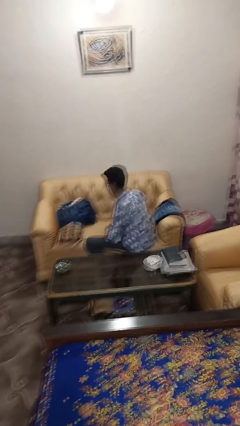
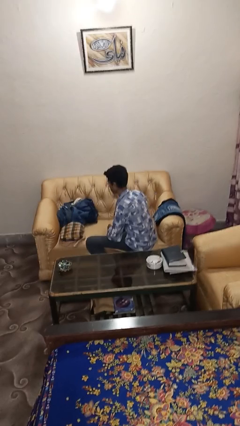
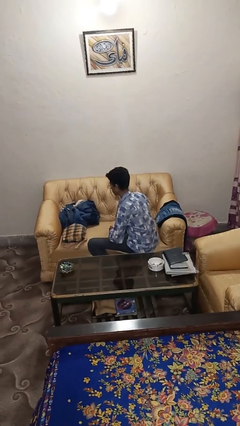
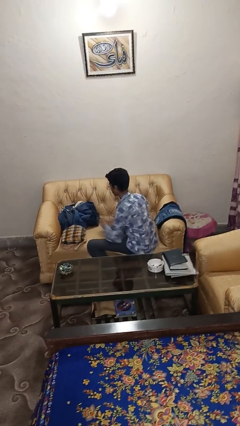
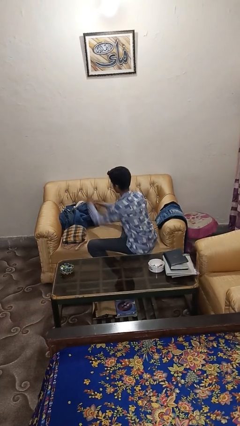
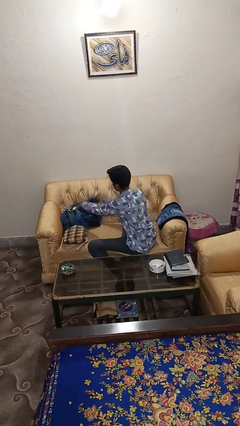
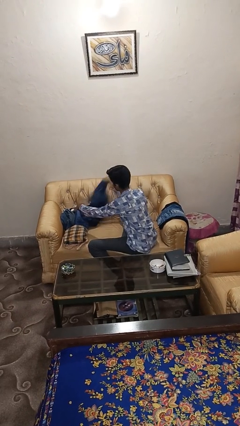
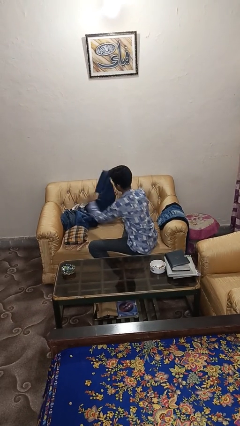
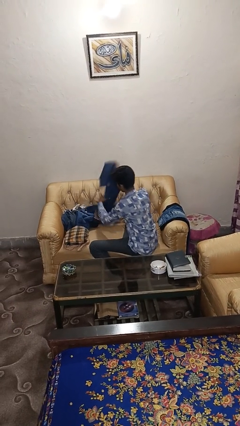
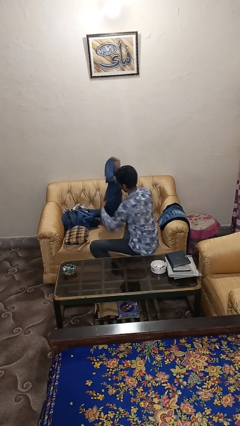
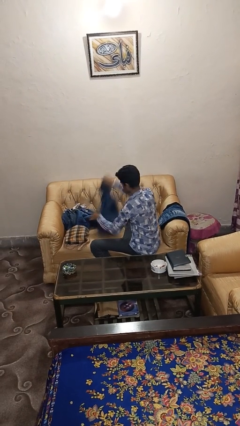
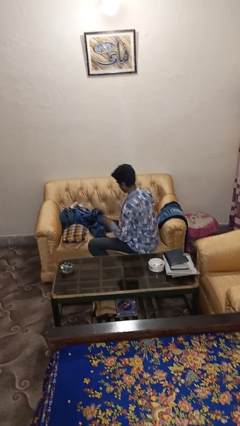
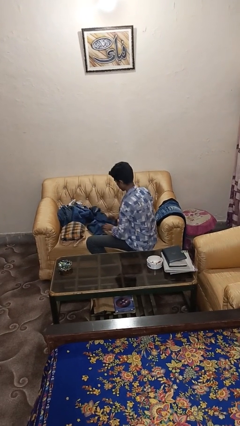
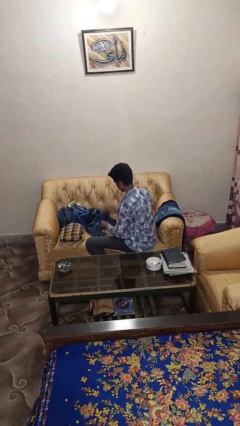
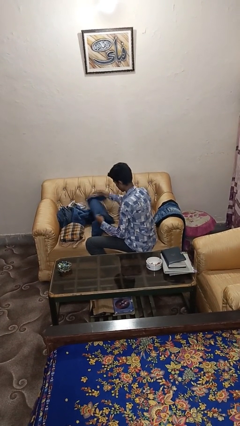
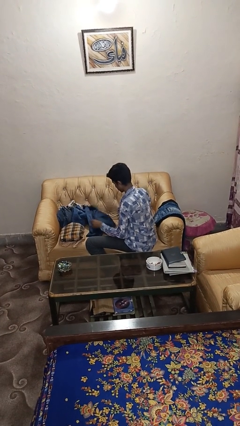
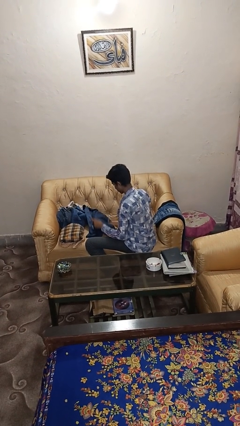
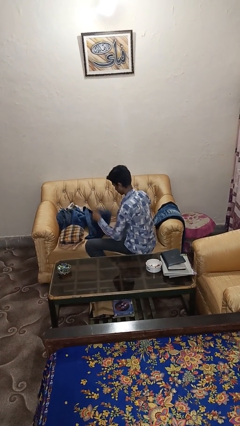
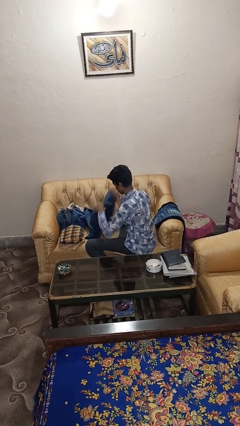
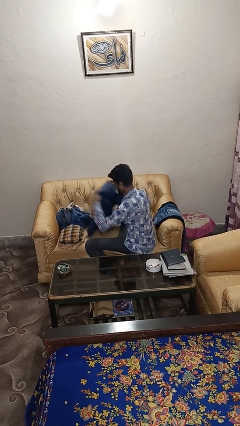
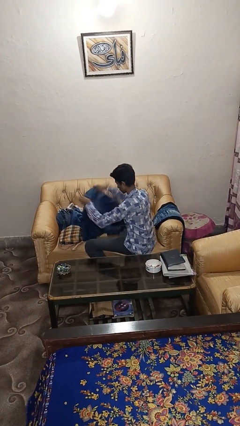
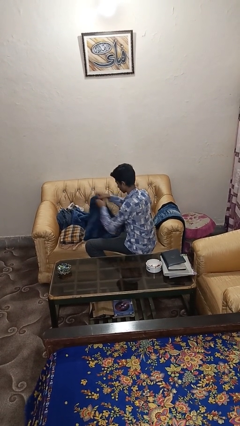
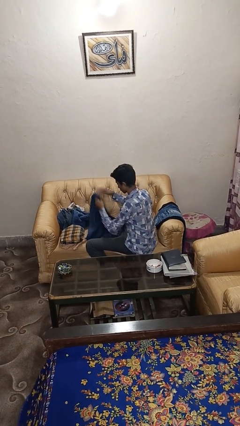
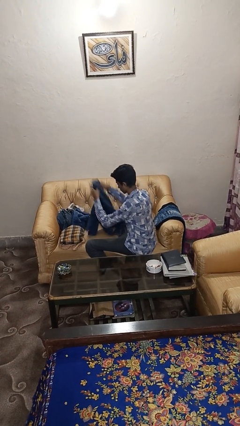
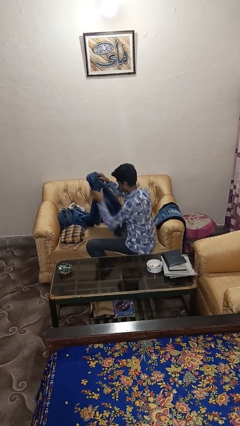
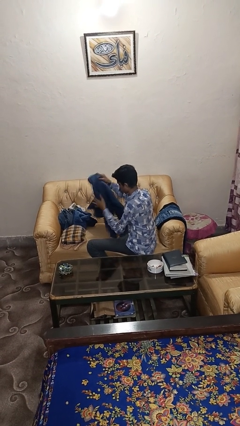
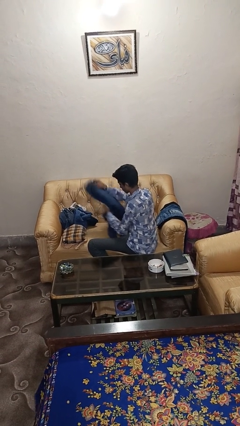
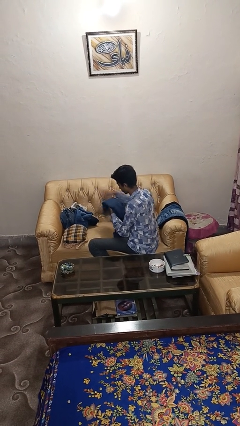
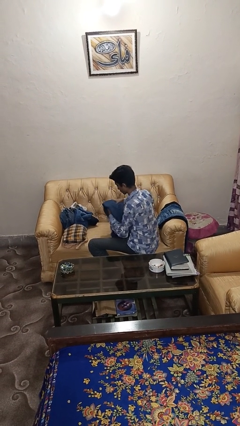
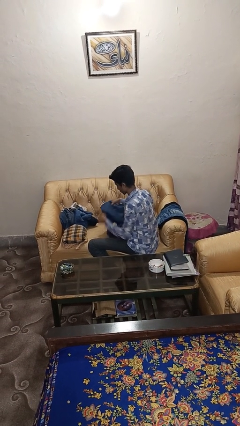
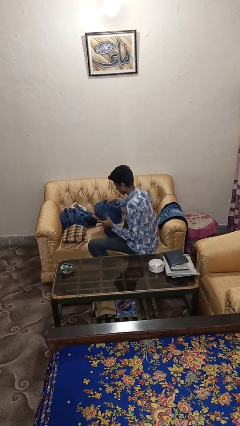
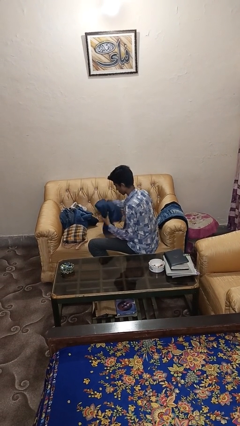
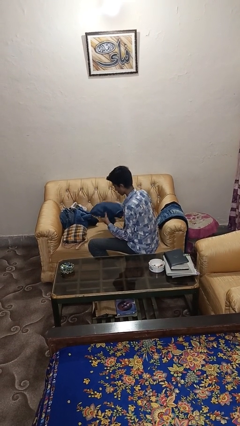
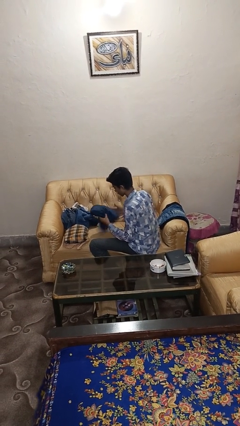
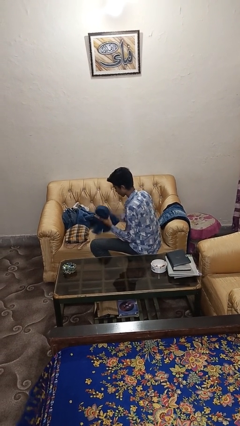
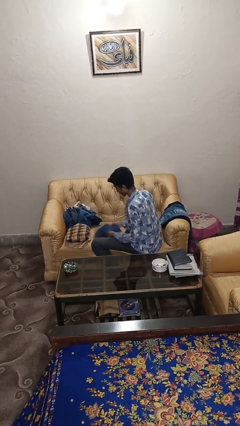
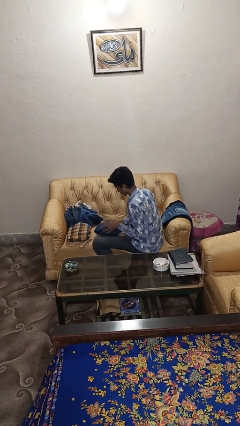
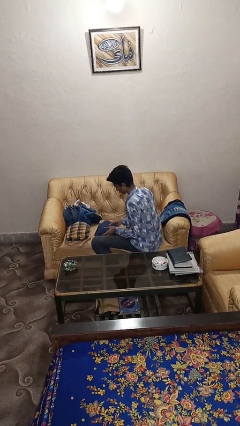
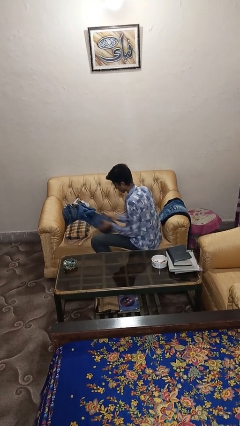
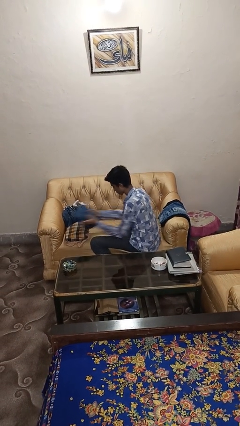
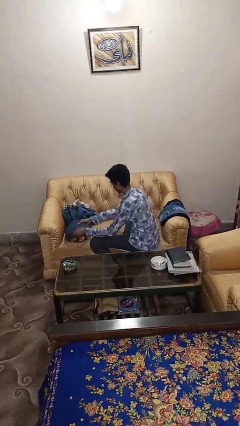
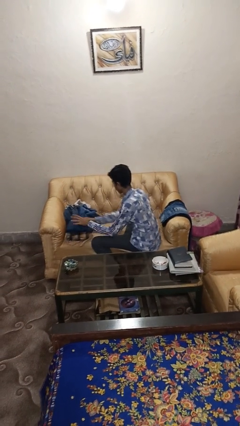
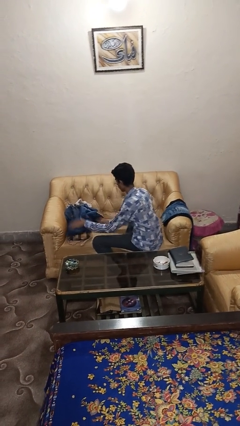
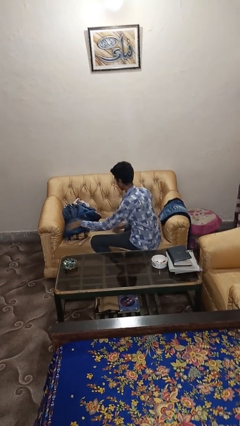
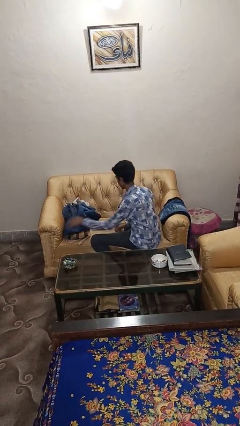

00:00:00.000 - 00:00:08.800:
person folds shirt

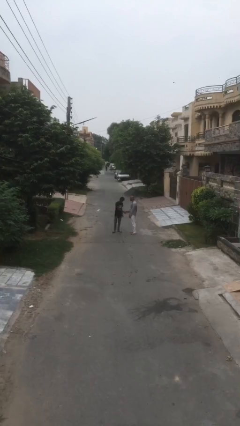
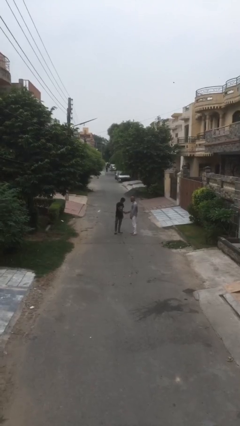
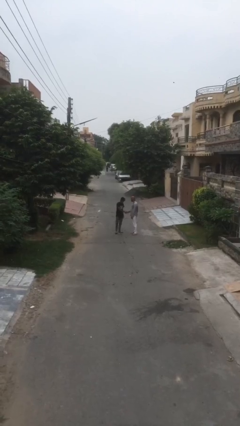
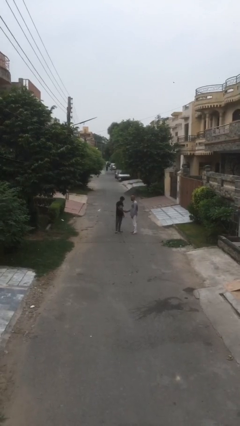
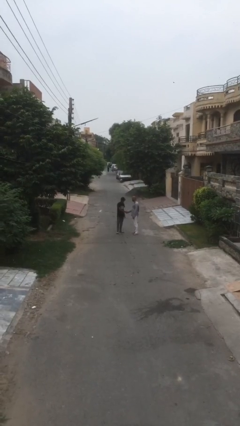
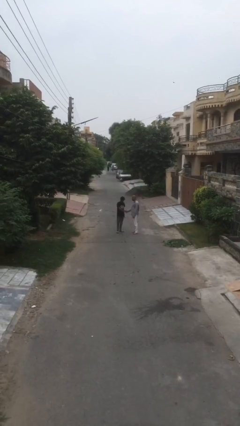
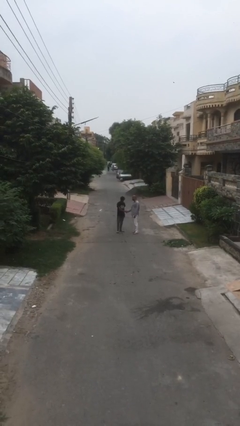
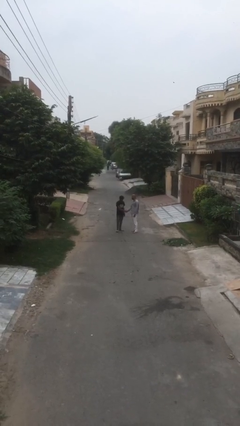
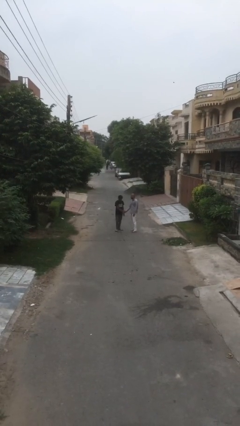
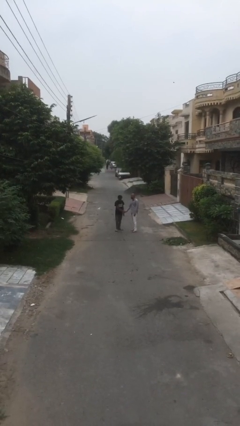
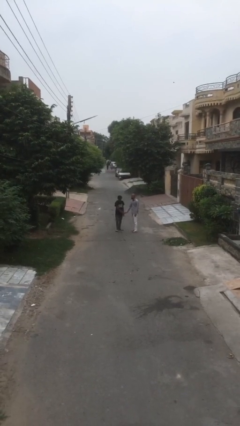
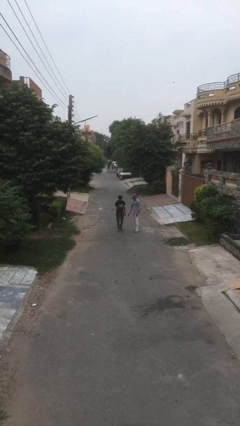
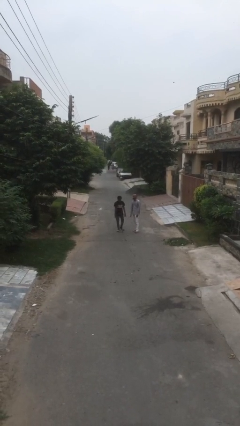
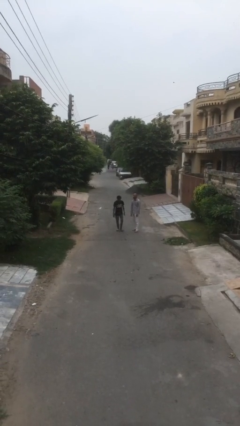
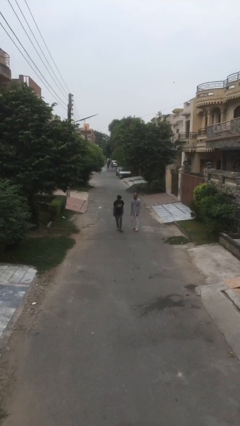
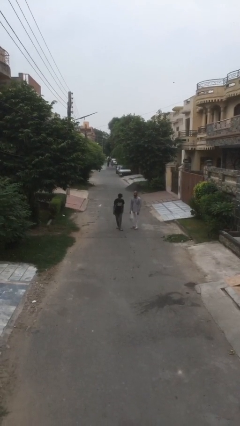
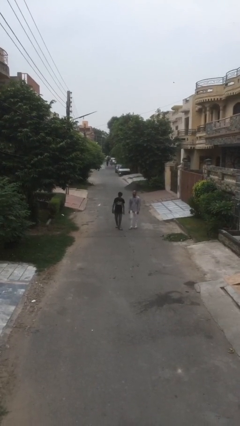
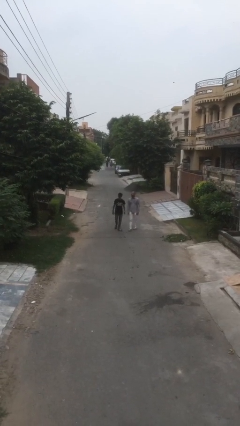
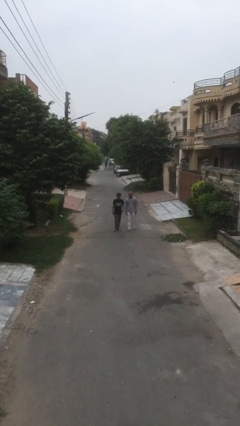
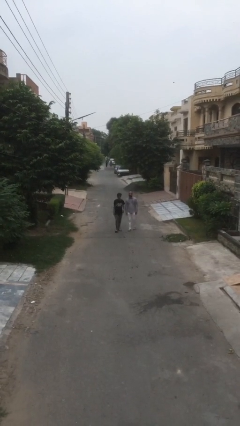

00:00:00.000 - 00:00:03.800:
person shakes hand

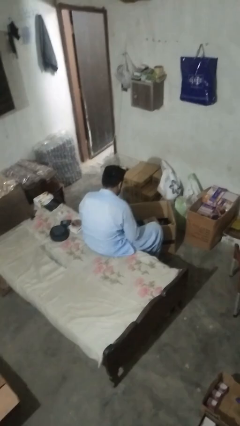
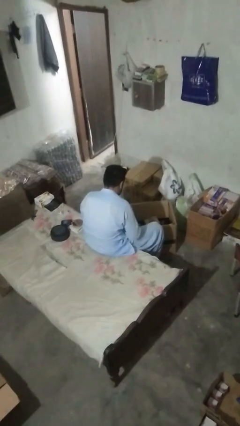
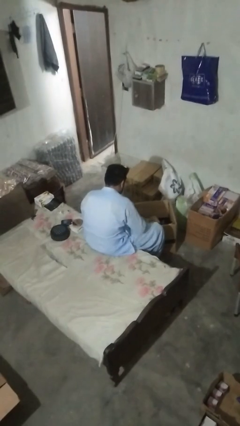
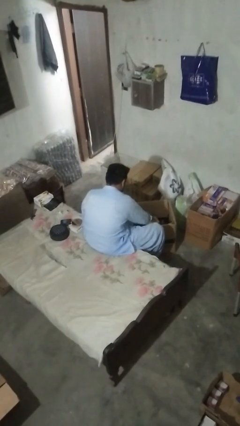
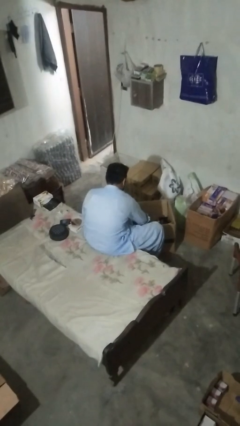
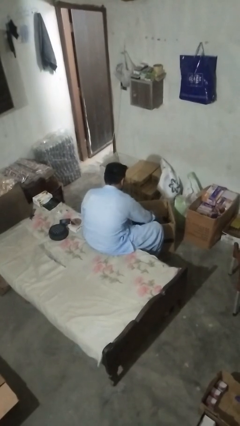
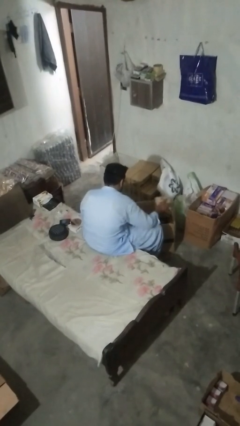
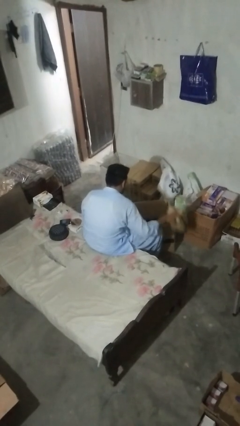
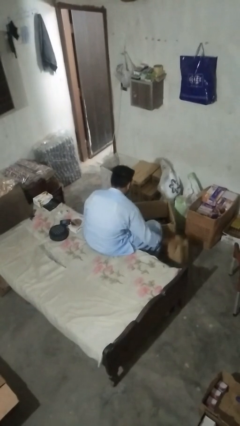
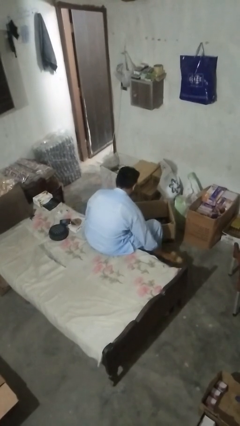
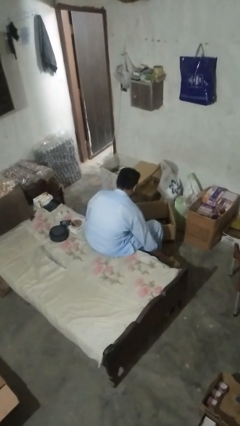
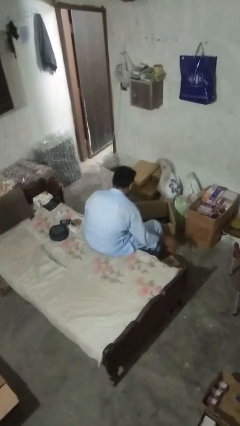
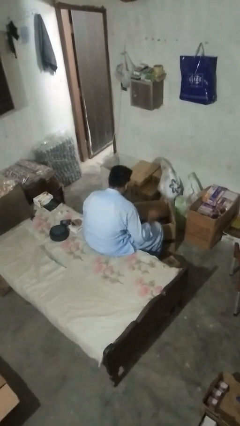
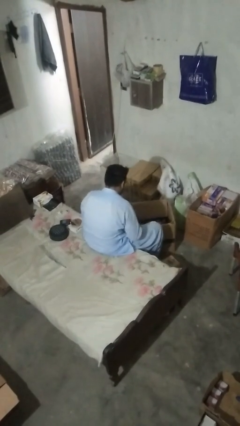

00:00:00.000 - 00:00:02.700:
person takes object from box

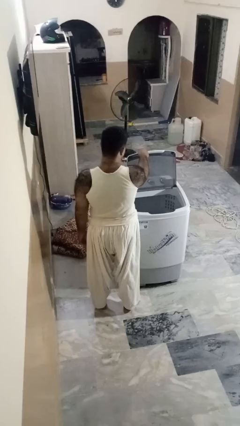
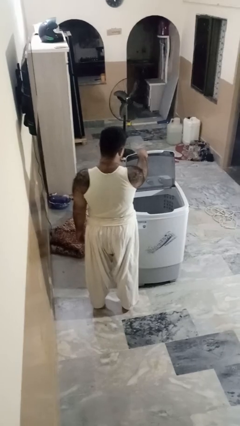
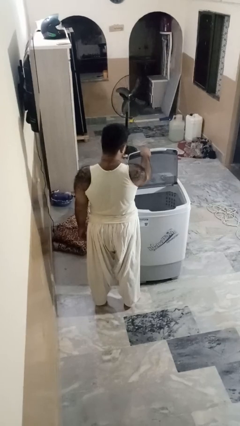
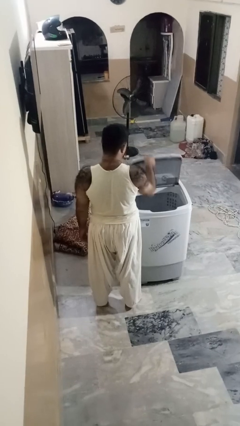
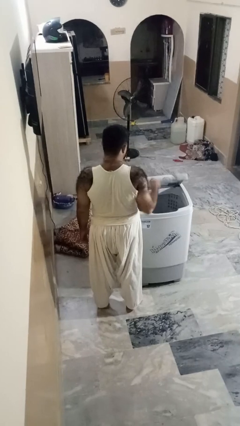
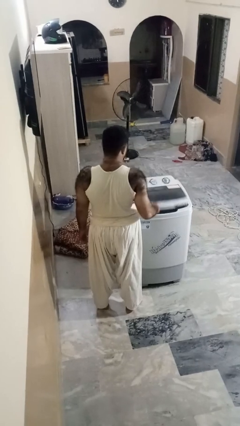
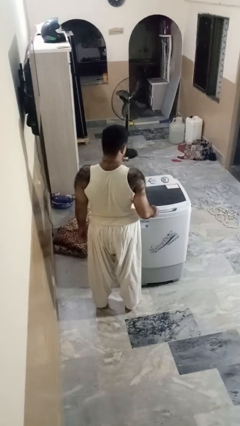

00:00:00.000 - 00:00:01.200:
person closes clothes washer

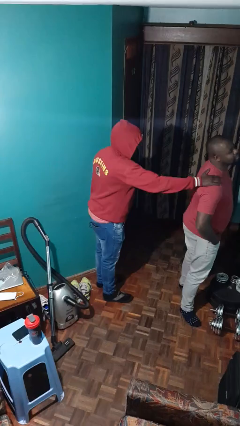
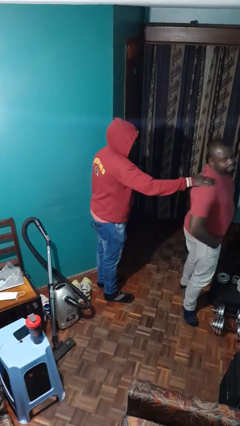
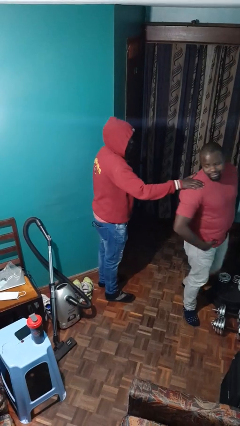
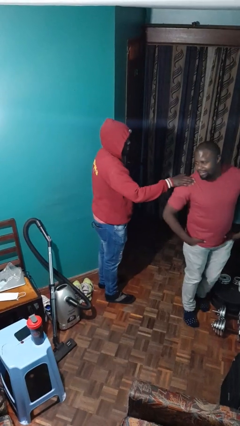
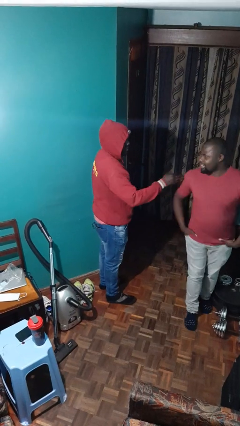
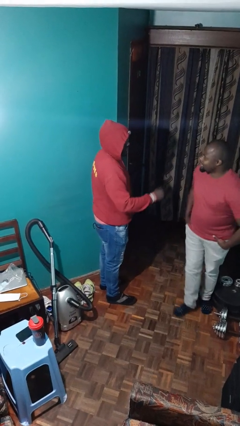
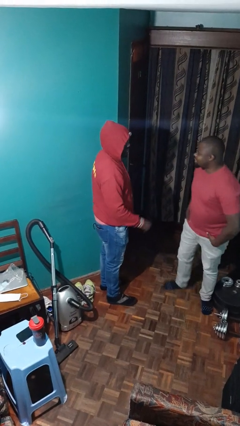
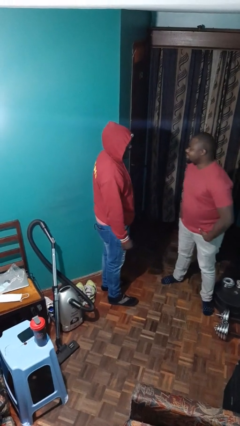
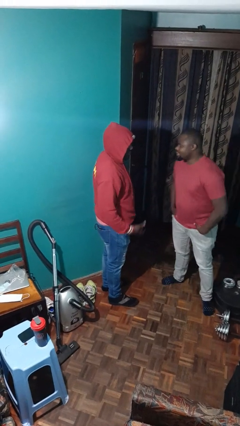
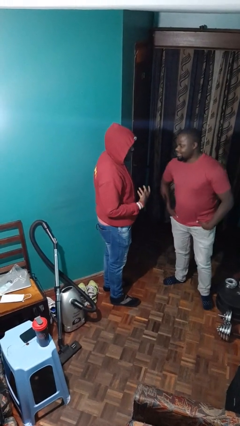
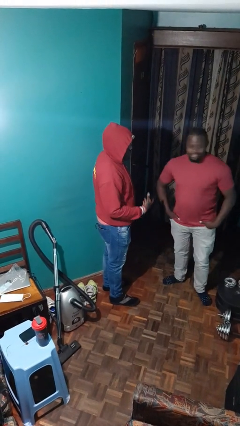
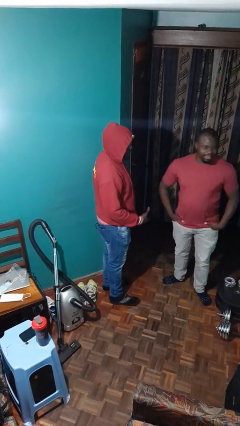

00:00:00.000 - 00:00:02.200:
person spins person around
